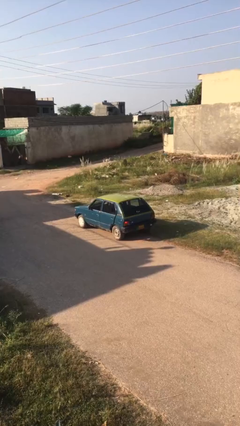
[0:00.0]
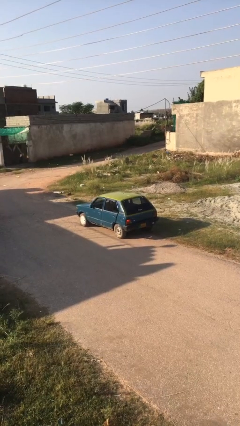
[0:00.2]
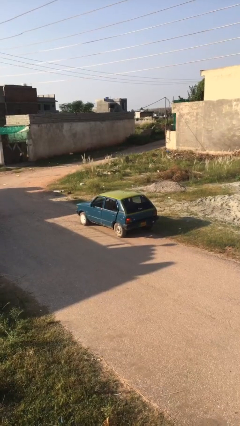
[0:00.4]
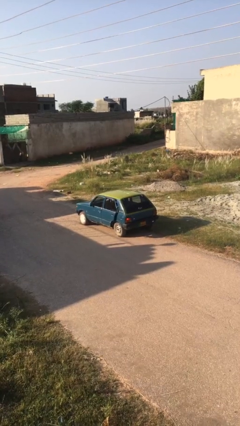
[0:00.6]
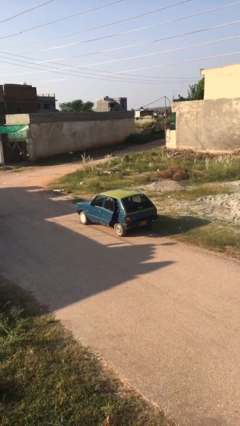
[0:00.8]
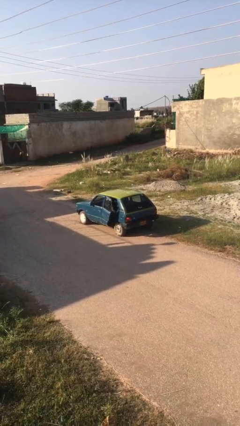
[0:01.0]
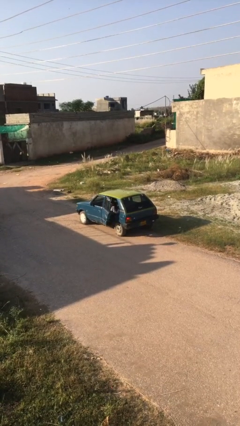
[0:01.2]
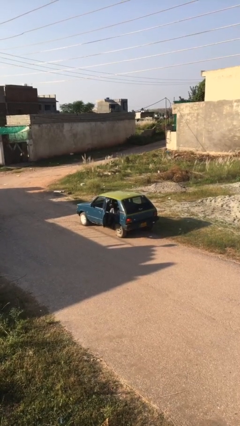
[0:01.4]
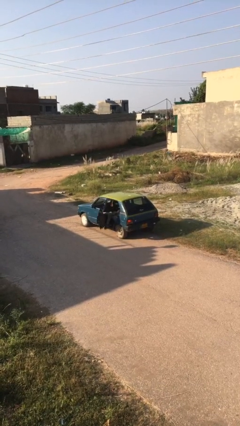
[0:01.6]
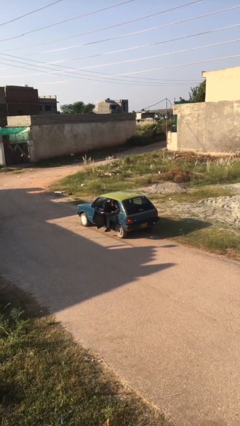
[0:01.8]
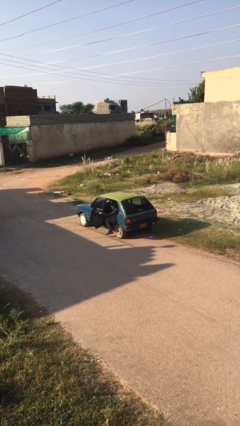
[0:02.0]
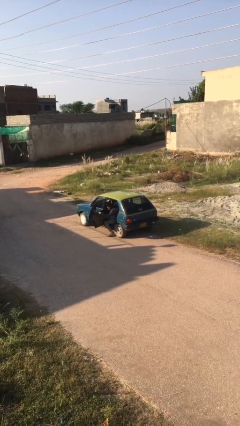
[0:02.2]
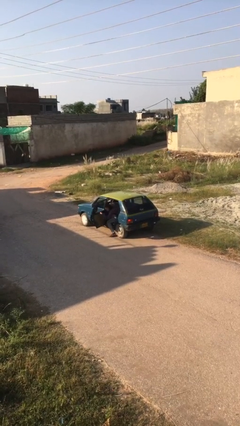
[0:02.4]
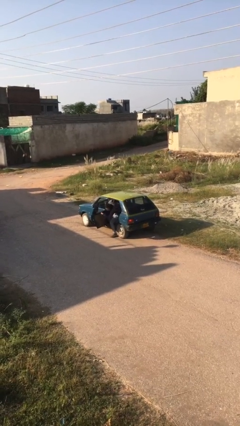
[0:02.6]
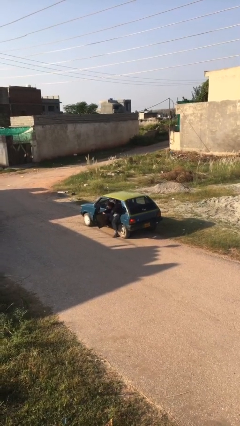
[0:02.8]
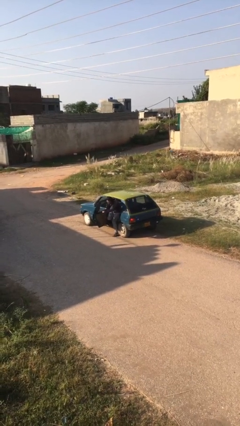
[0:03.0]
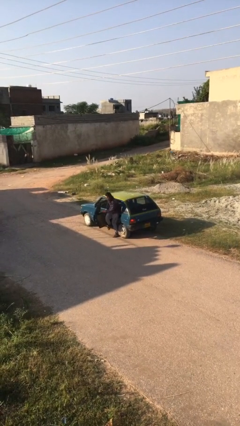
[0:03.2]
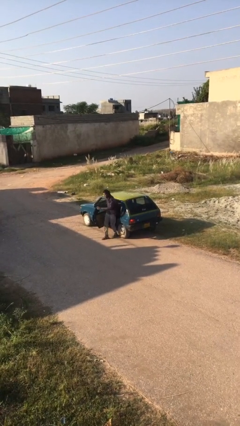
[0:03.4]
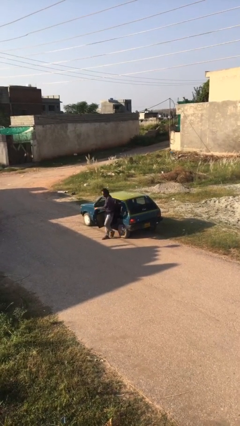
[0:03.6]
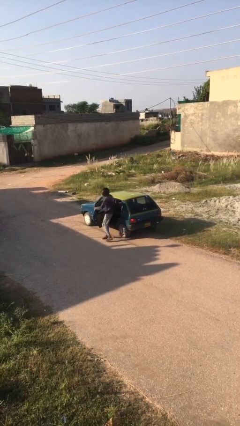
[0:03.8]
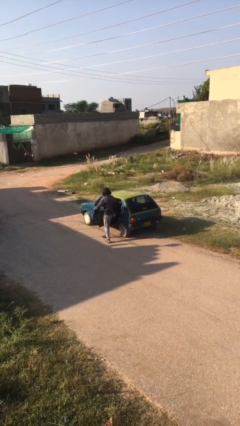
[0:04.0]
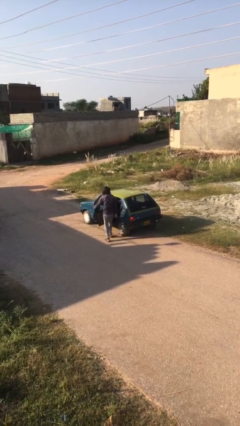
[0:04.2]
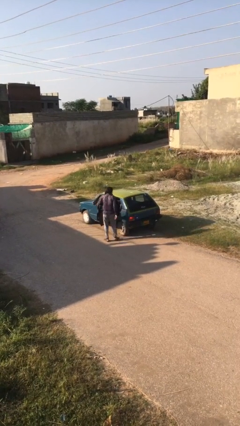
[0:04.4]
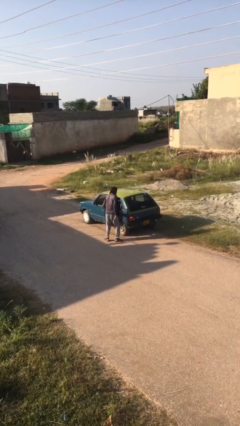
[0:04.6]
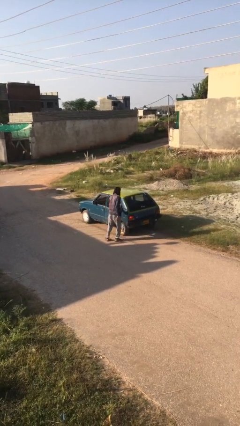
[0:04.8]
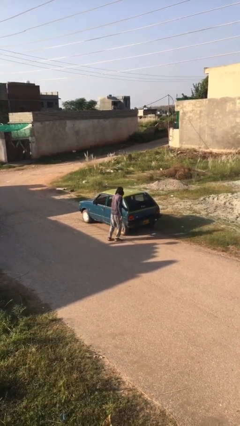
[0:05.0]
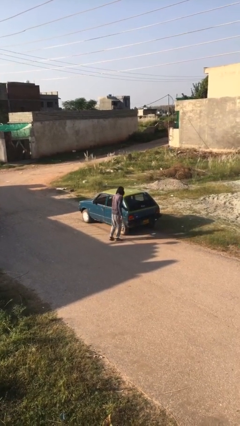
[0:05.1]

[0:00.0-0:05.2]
car drops off person

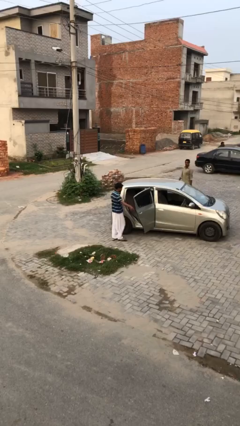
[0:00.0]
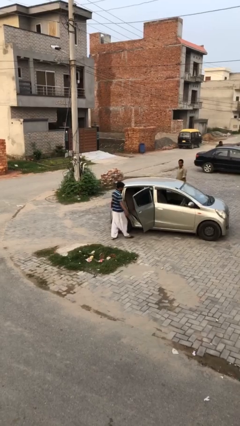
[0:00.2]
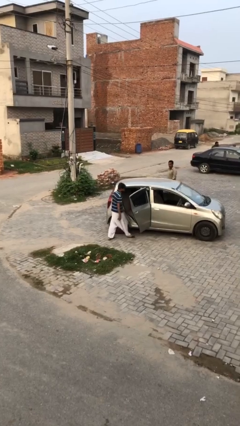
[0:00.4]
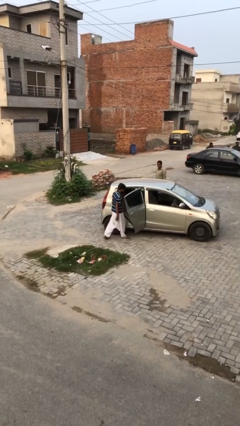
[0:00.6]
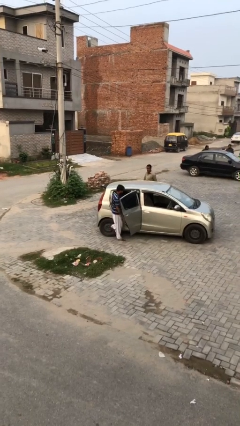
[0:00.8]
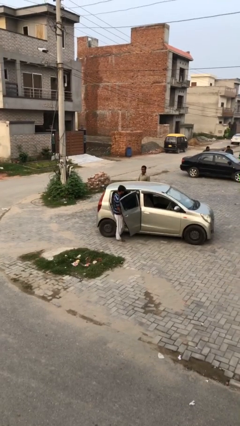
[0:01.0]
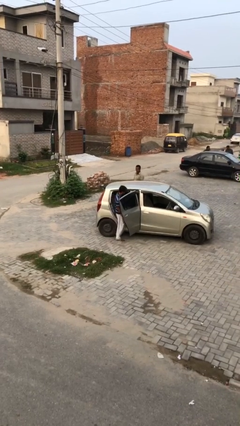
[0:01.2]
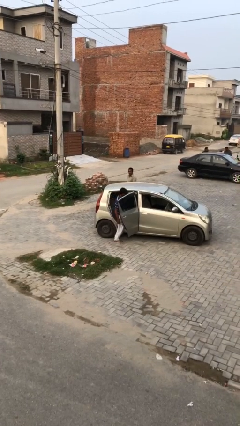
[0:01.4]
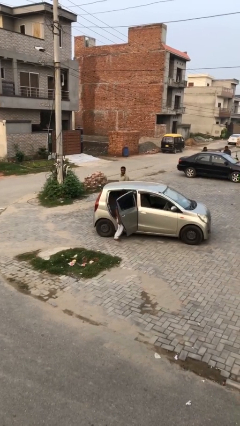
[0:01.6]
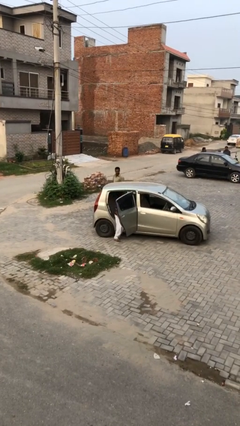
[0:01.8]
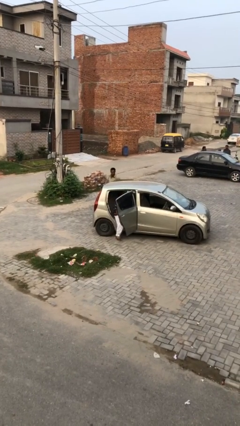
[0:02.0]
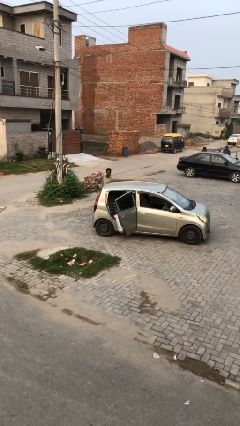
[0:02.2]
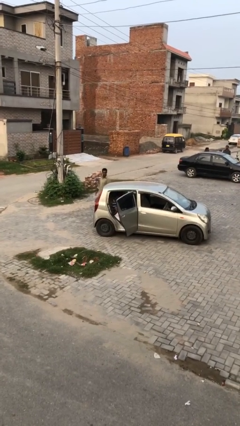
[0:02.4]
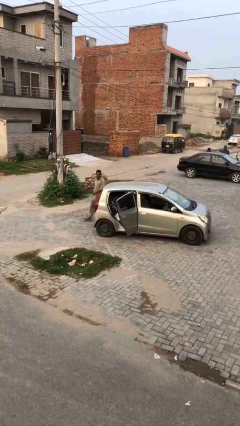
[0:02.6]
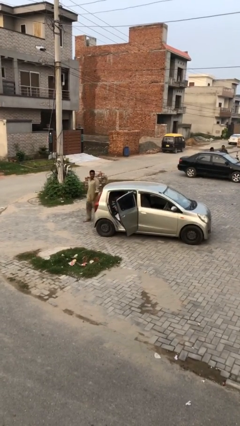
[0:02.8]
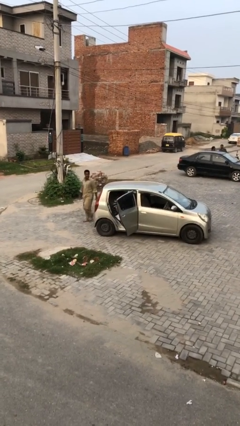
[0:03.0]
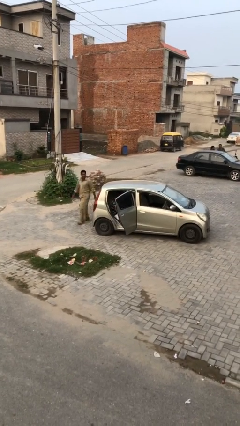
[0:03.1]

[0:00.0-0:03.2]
person enters car

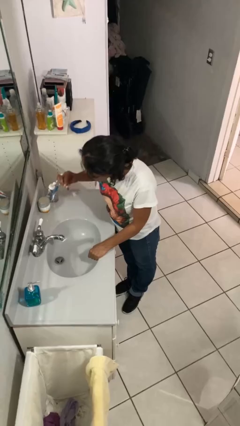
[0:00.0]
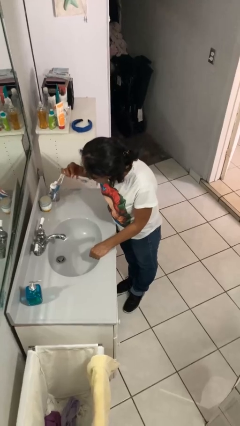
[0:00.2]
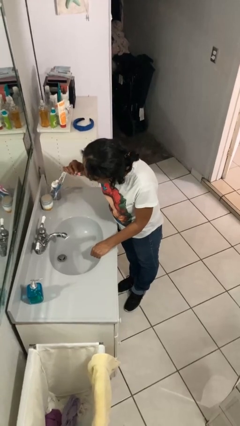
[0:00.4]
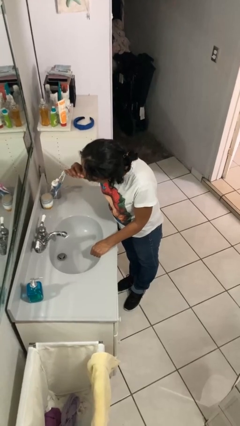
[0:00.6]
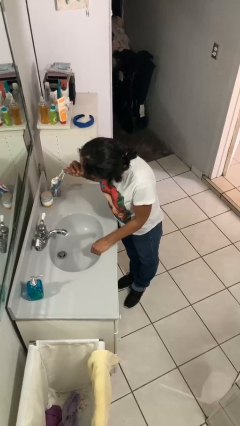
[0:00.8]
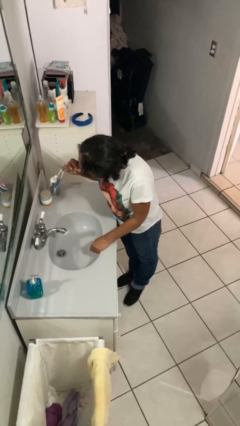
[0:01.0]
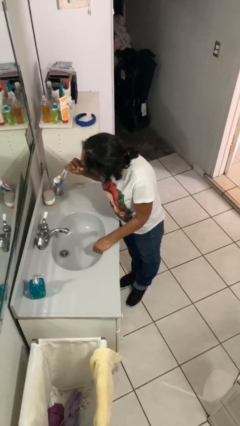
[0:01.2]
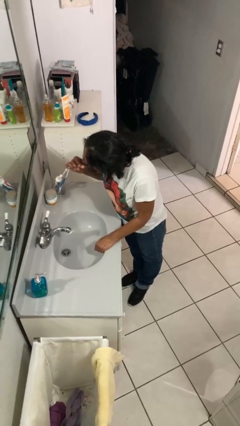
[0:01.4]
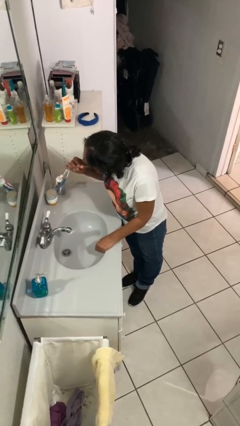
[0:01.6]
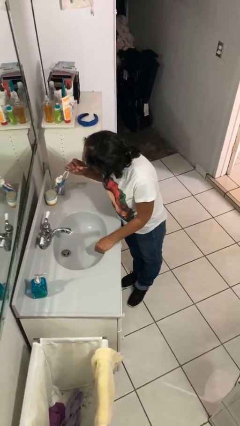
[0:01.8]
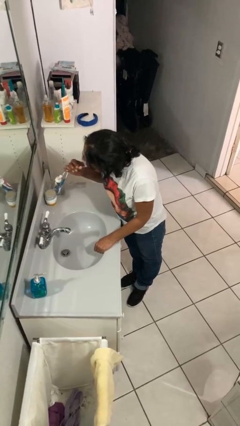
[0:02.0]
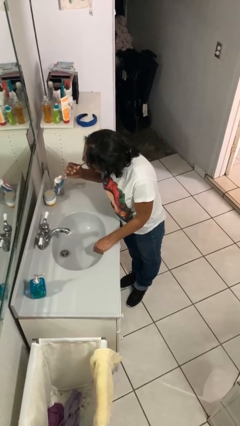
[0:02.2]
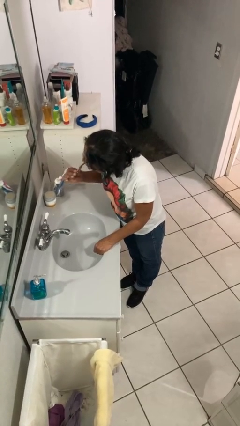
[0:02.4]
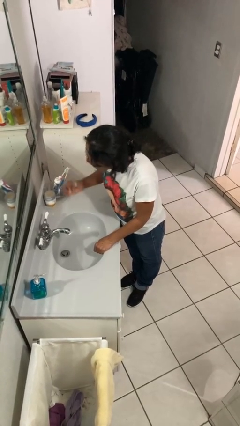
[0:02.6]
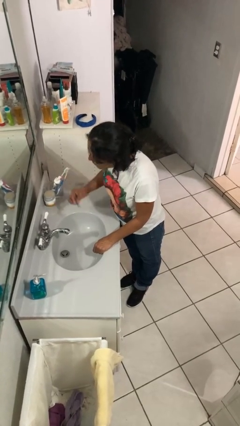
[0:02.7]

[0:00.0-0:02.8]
person brushes teeth

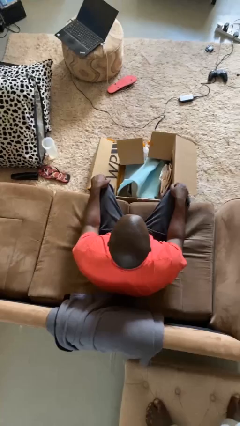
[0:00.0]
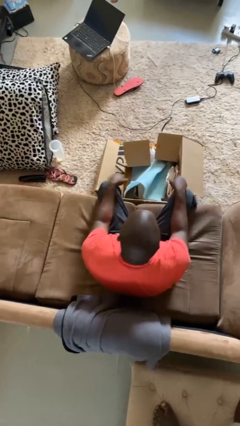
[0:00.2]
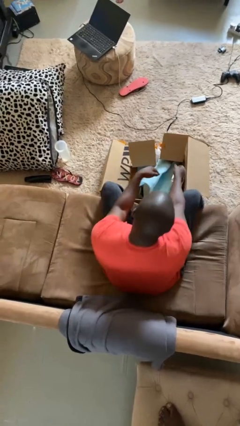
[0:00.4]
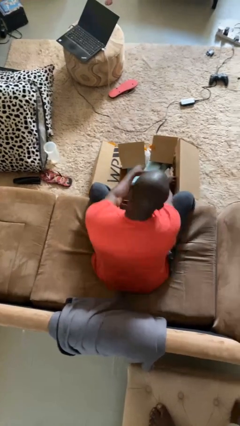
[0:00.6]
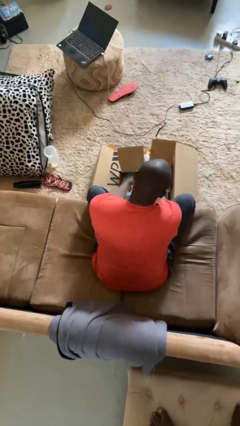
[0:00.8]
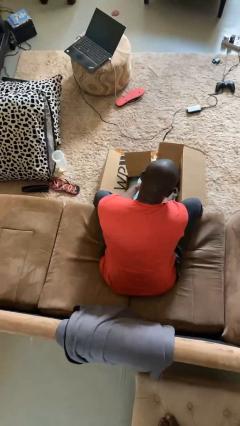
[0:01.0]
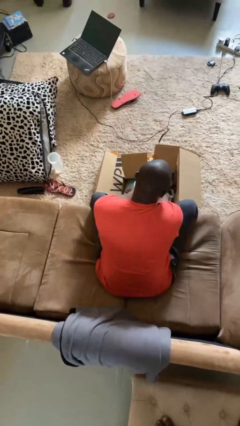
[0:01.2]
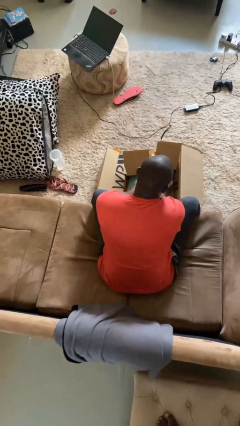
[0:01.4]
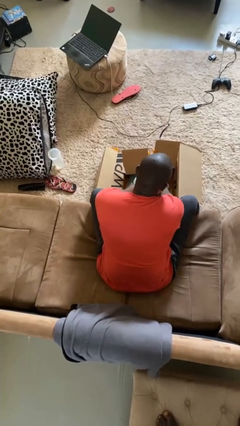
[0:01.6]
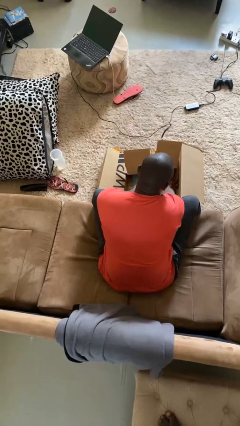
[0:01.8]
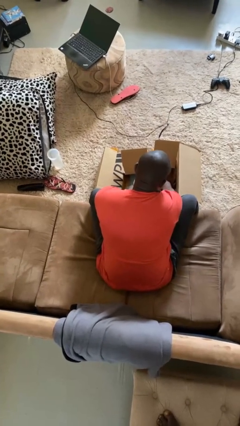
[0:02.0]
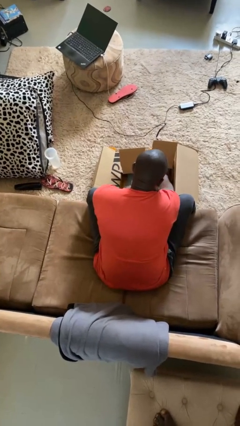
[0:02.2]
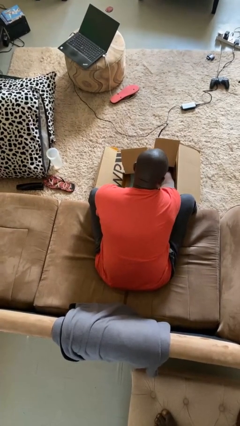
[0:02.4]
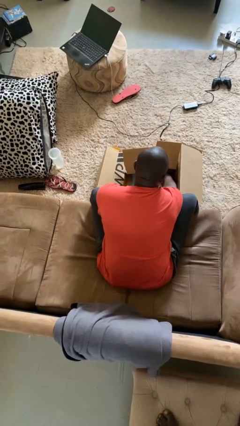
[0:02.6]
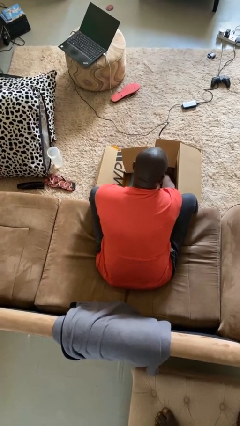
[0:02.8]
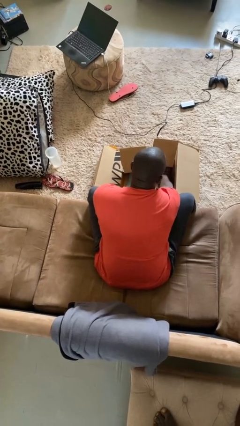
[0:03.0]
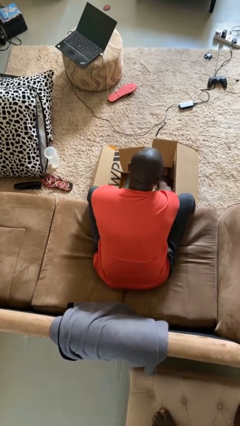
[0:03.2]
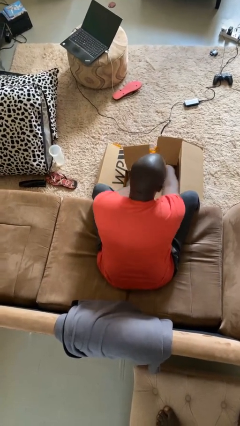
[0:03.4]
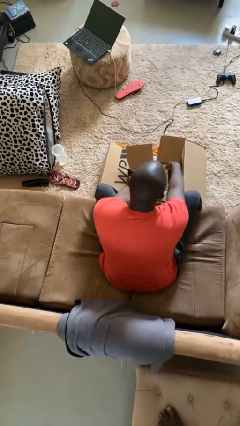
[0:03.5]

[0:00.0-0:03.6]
person searches in box

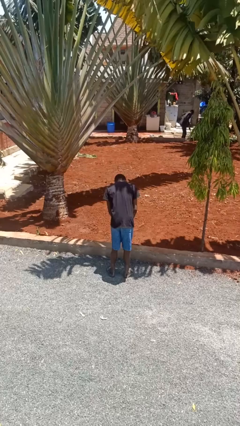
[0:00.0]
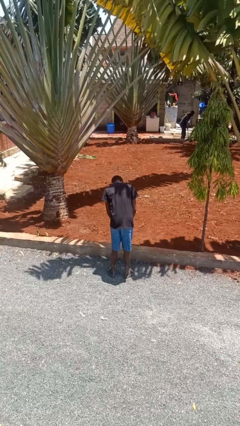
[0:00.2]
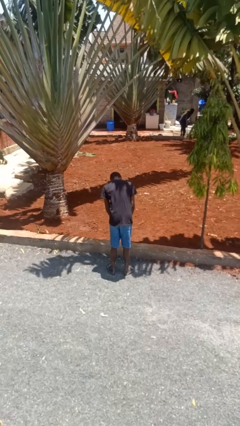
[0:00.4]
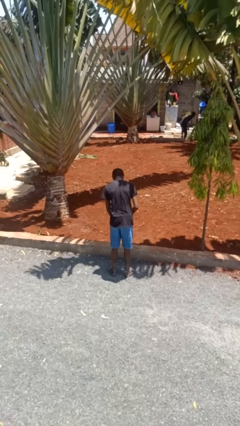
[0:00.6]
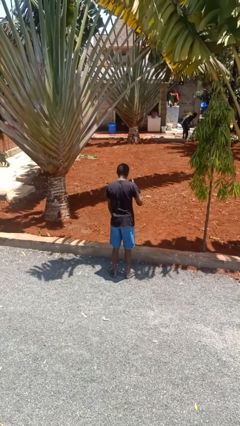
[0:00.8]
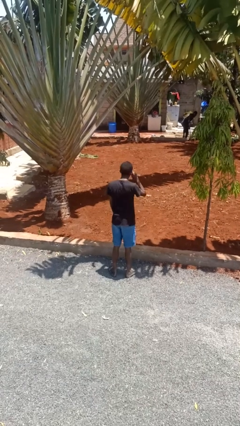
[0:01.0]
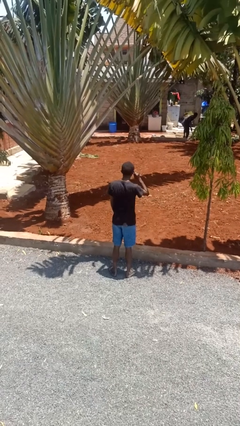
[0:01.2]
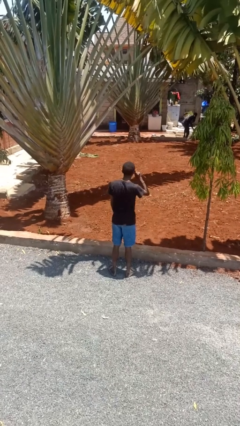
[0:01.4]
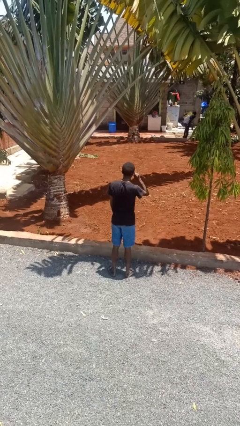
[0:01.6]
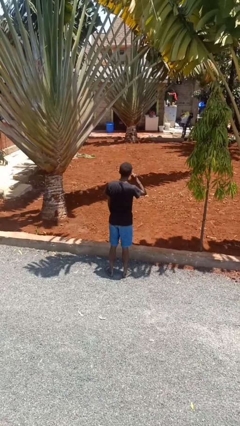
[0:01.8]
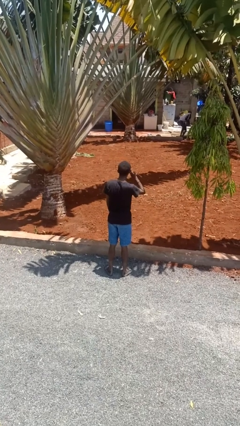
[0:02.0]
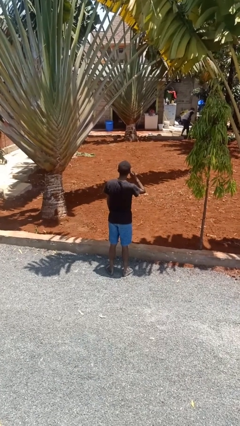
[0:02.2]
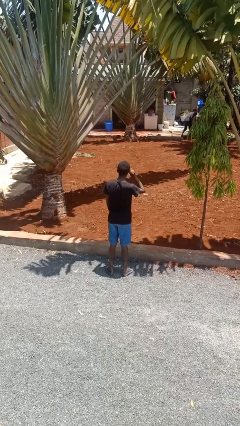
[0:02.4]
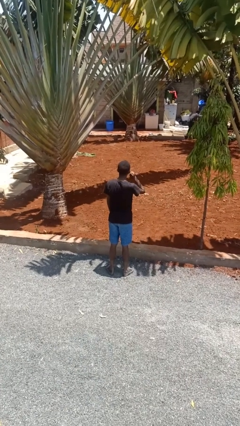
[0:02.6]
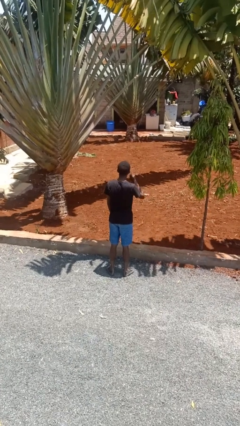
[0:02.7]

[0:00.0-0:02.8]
person touches earlobe
